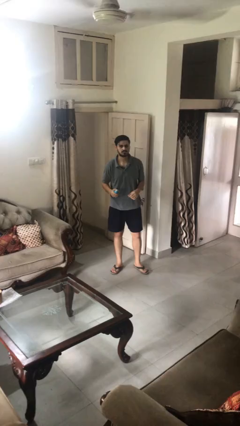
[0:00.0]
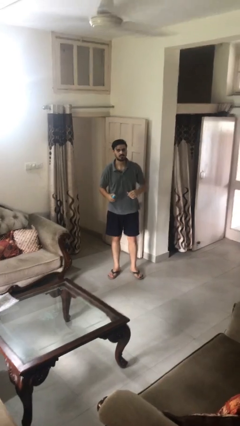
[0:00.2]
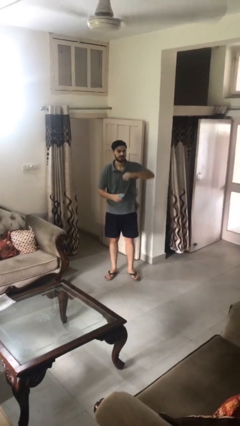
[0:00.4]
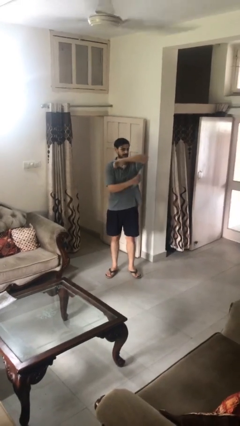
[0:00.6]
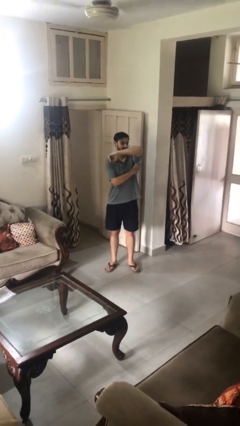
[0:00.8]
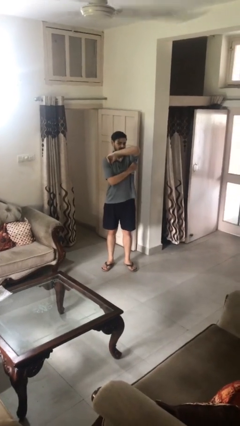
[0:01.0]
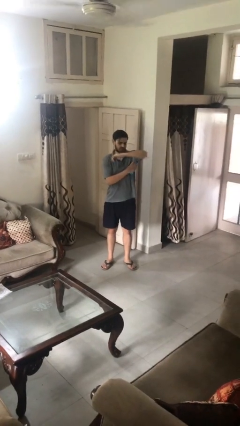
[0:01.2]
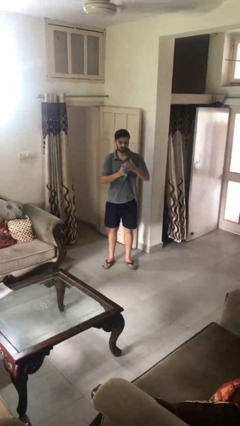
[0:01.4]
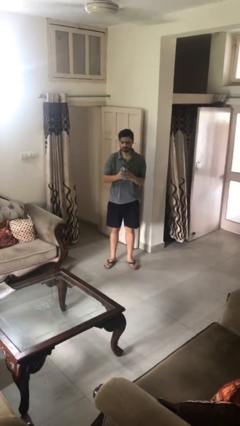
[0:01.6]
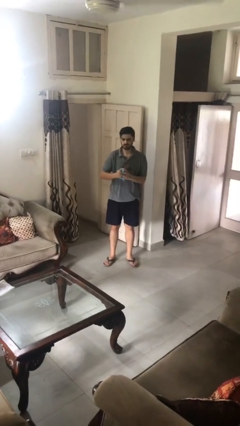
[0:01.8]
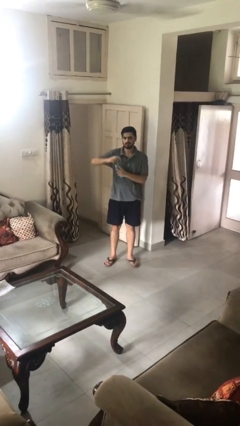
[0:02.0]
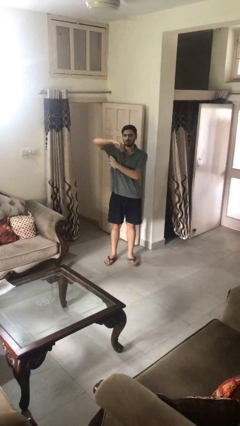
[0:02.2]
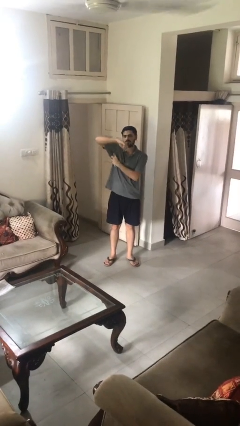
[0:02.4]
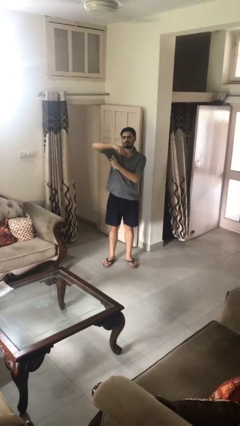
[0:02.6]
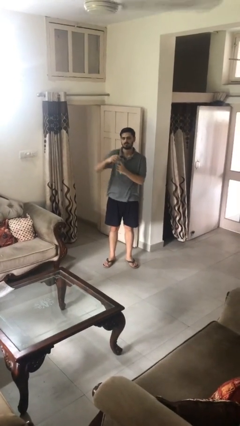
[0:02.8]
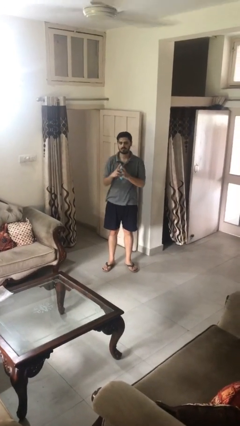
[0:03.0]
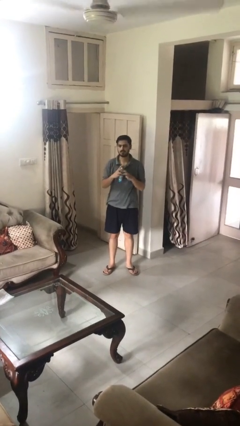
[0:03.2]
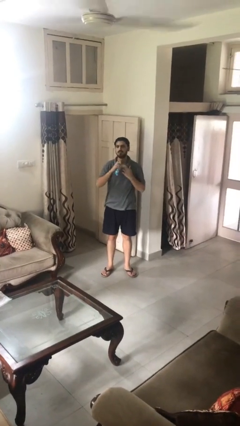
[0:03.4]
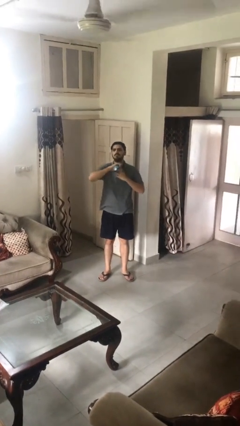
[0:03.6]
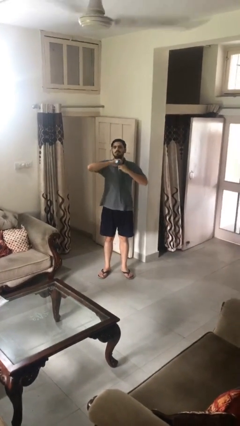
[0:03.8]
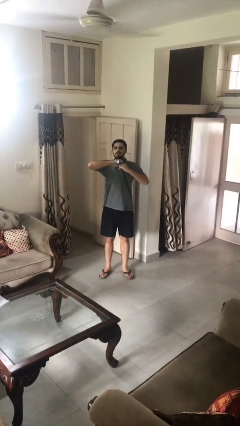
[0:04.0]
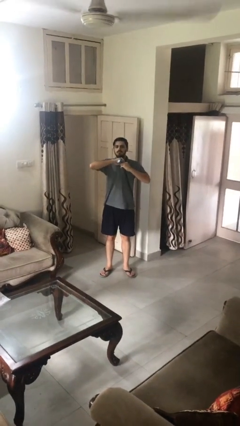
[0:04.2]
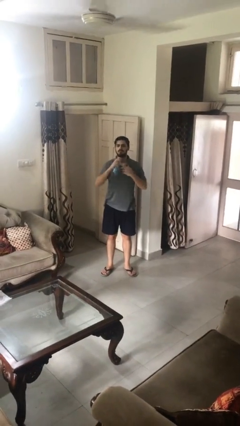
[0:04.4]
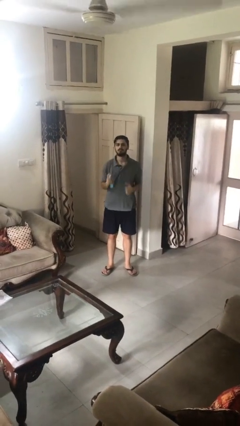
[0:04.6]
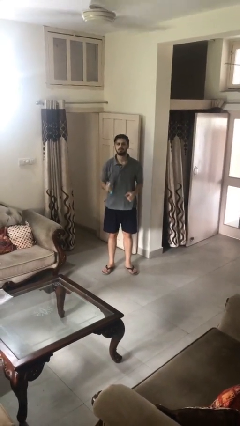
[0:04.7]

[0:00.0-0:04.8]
person applies deodorant

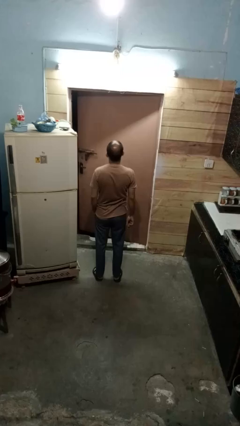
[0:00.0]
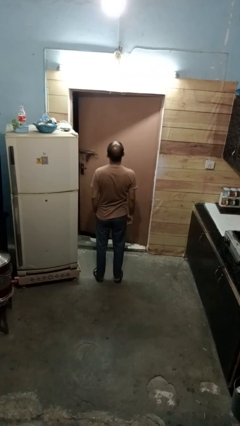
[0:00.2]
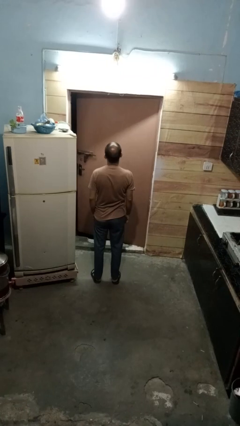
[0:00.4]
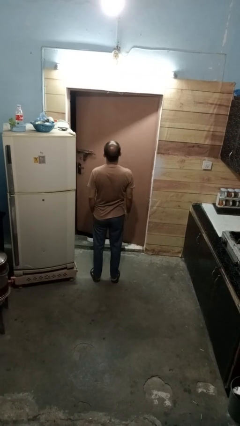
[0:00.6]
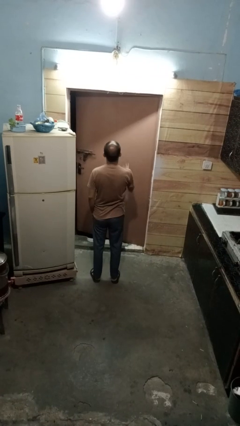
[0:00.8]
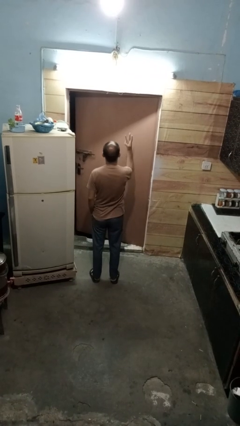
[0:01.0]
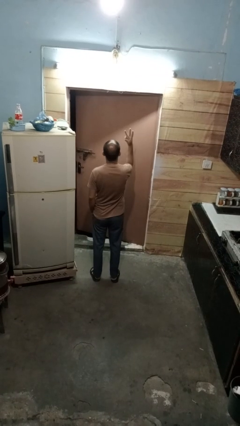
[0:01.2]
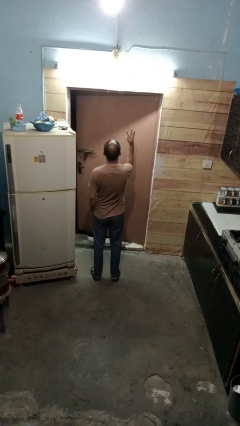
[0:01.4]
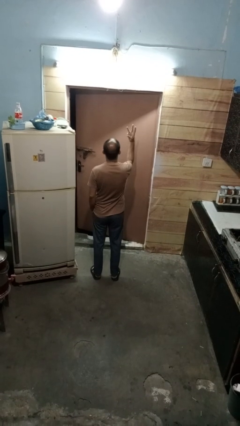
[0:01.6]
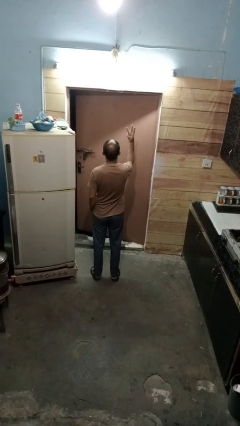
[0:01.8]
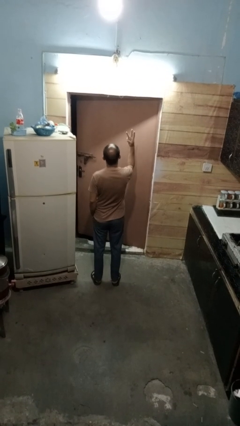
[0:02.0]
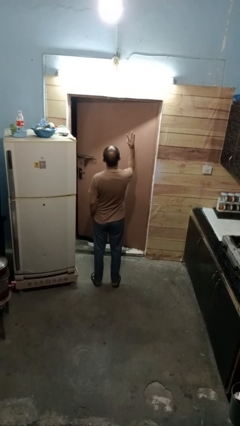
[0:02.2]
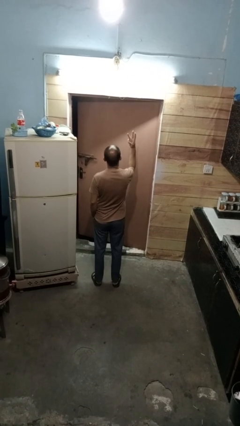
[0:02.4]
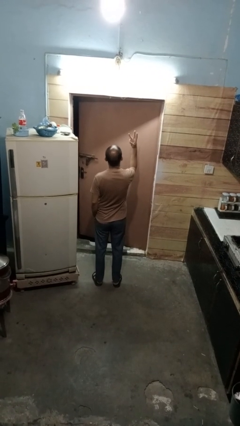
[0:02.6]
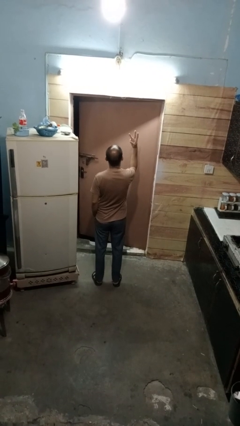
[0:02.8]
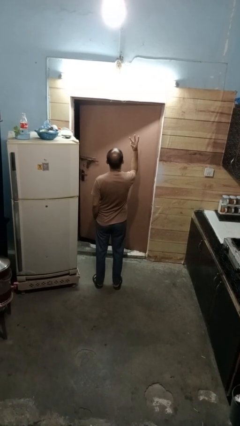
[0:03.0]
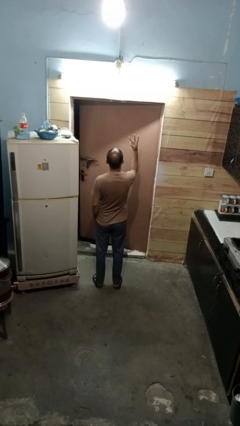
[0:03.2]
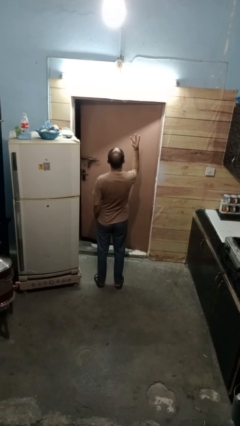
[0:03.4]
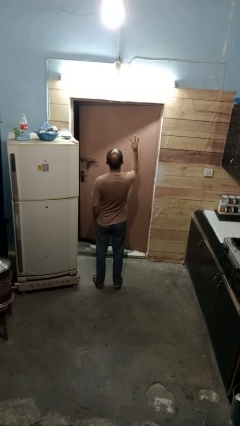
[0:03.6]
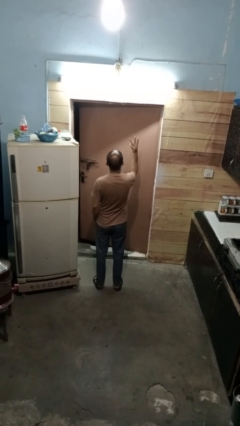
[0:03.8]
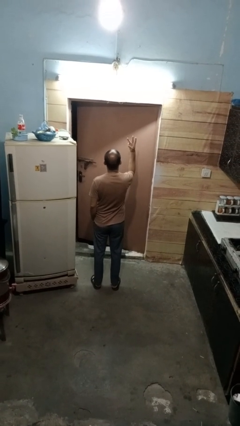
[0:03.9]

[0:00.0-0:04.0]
person gestures number three

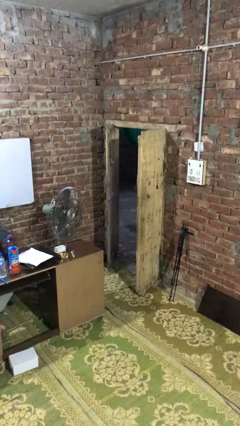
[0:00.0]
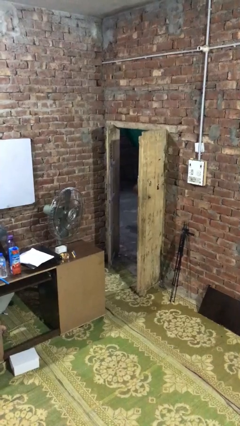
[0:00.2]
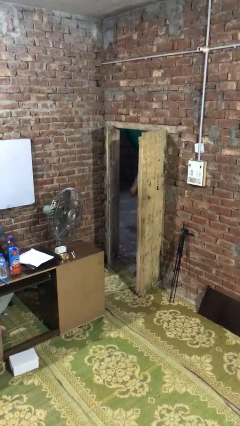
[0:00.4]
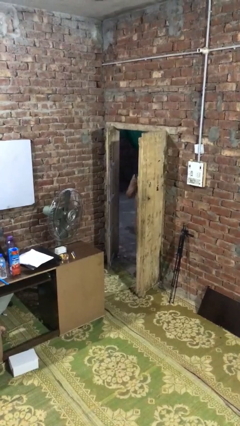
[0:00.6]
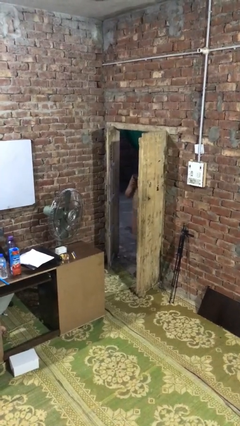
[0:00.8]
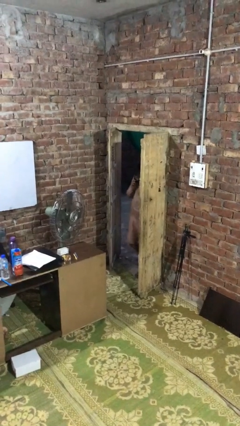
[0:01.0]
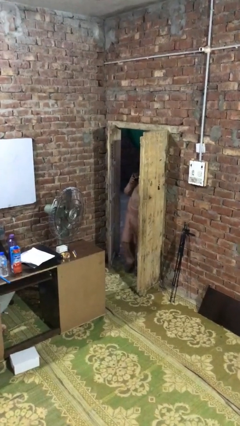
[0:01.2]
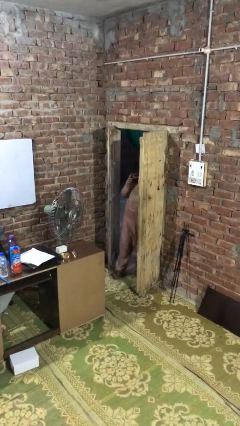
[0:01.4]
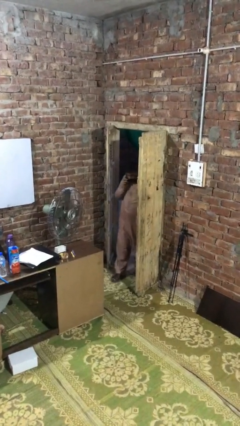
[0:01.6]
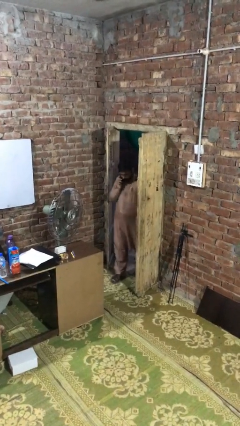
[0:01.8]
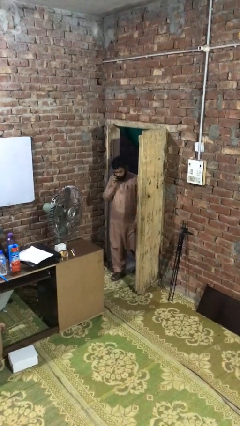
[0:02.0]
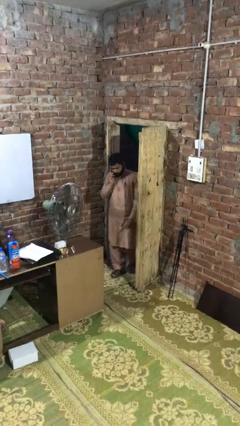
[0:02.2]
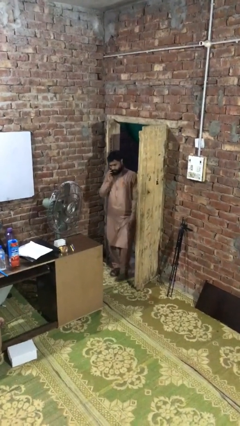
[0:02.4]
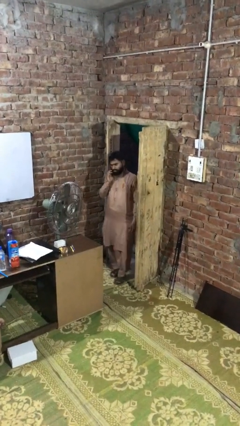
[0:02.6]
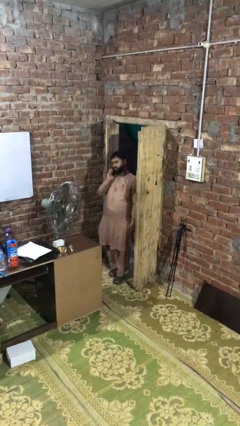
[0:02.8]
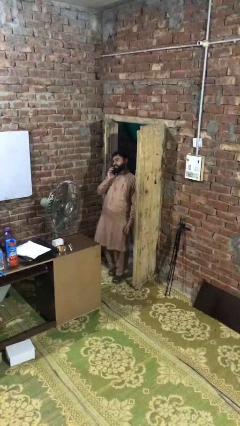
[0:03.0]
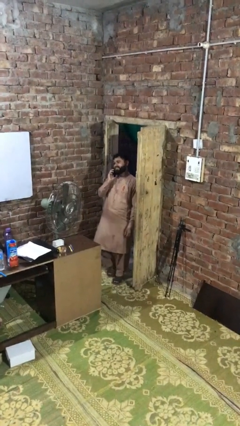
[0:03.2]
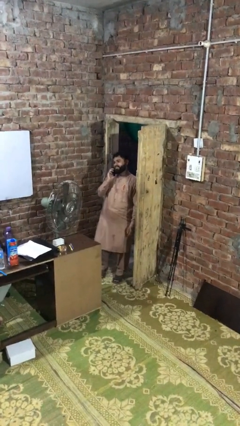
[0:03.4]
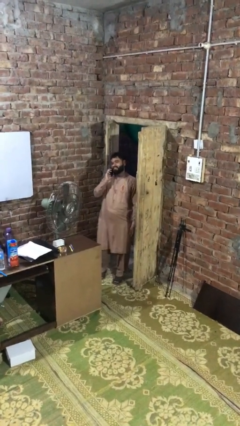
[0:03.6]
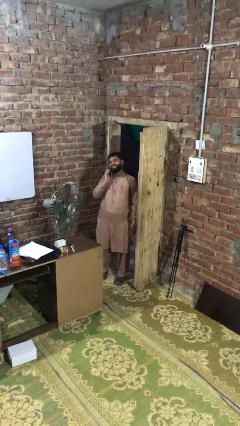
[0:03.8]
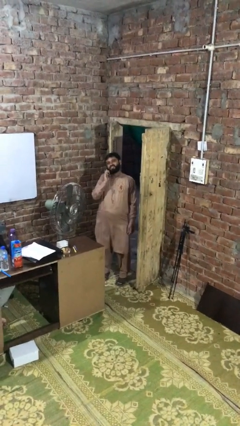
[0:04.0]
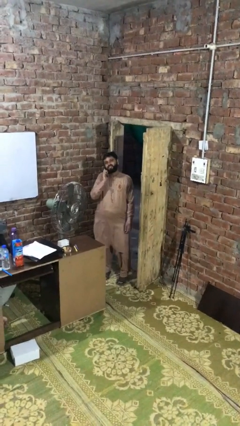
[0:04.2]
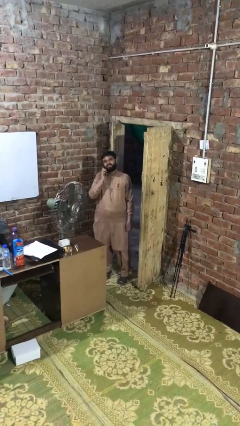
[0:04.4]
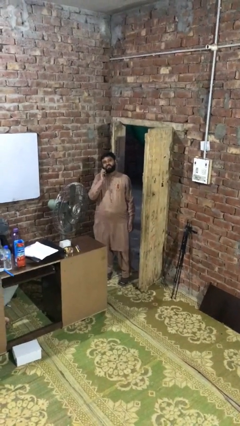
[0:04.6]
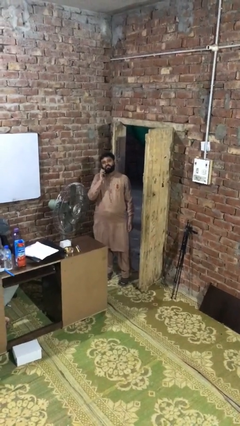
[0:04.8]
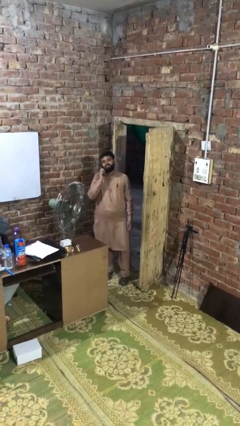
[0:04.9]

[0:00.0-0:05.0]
person enters scene through structure

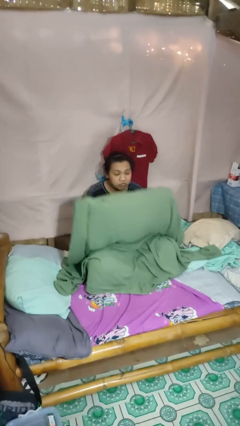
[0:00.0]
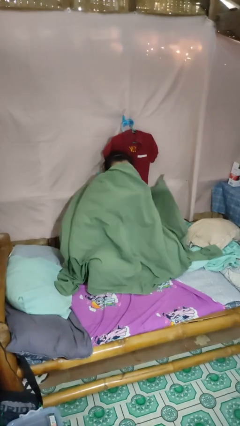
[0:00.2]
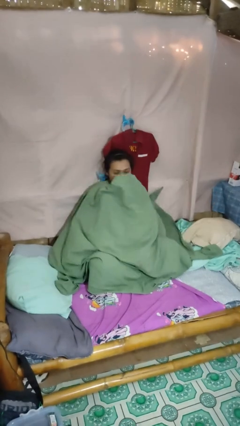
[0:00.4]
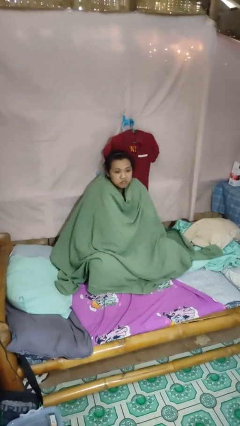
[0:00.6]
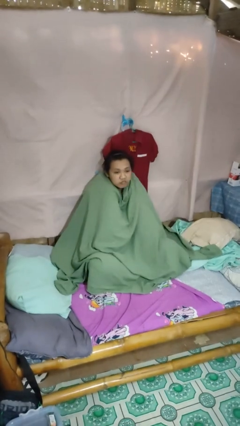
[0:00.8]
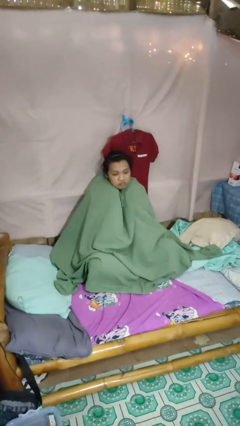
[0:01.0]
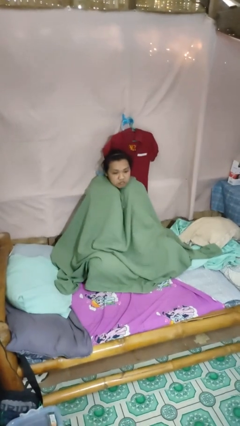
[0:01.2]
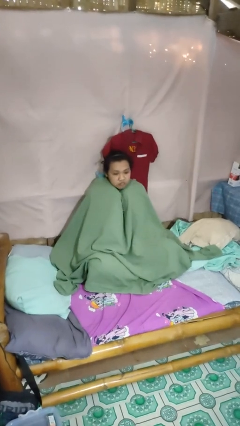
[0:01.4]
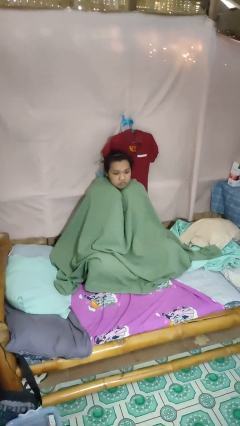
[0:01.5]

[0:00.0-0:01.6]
person covers with blanket

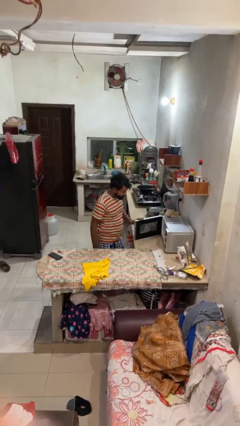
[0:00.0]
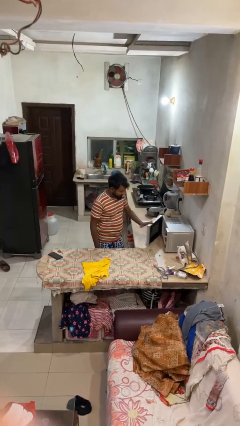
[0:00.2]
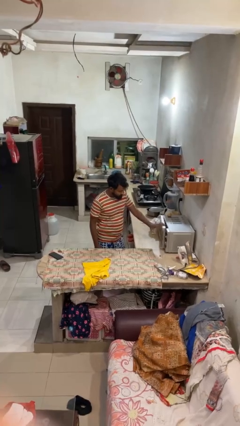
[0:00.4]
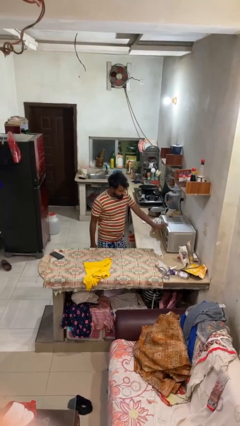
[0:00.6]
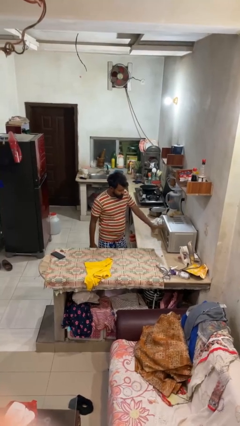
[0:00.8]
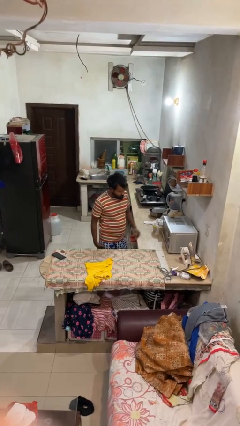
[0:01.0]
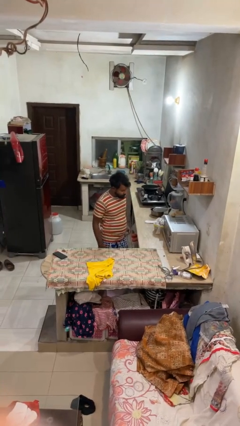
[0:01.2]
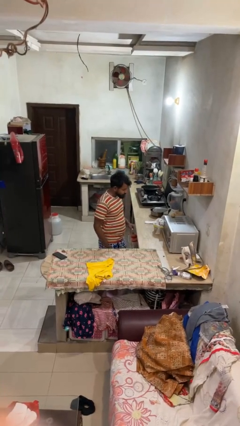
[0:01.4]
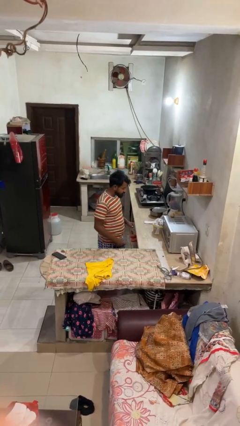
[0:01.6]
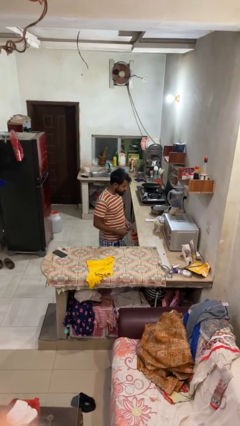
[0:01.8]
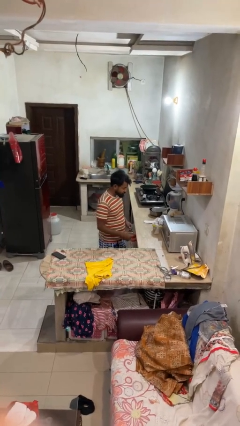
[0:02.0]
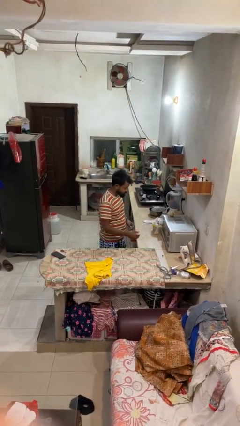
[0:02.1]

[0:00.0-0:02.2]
person closes microwave
